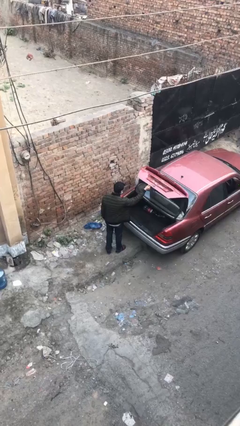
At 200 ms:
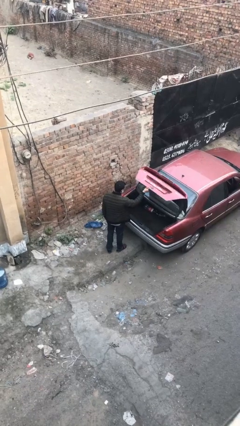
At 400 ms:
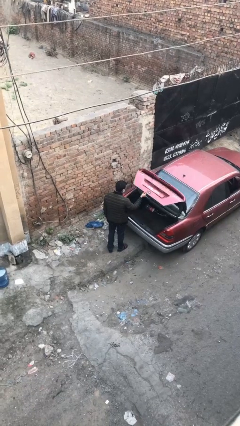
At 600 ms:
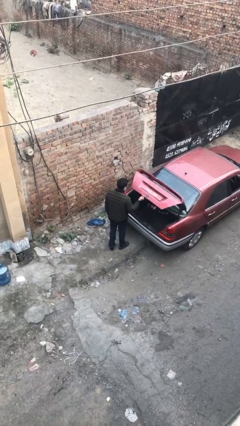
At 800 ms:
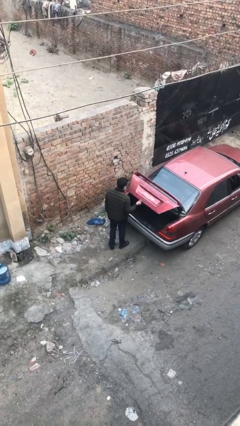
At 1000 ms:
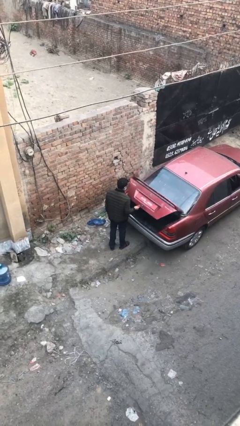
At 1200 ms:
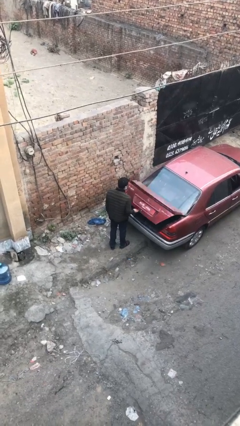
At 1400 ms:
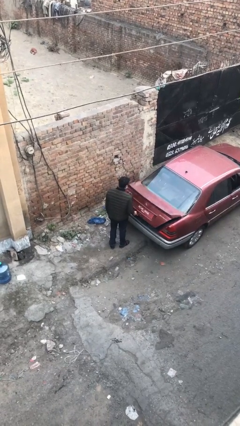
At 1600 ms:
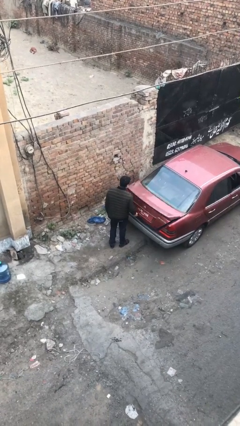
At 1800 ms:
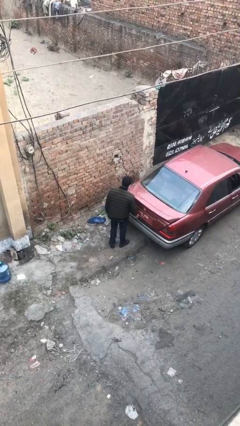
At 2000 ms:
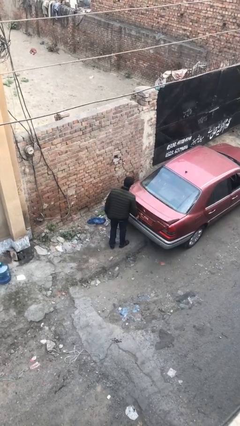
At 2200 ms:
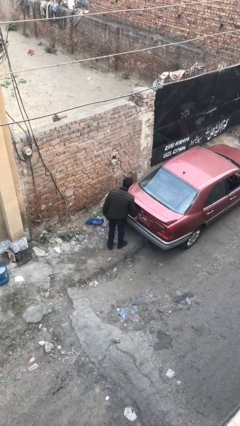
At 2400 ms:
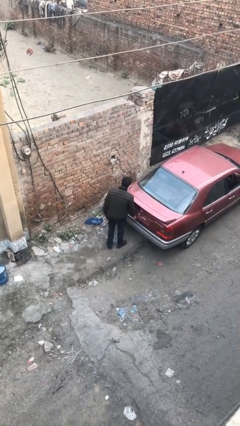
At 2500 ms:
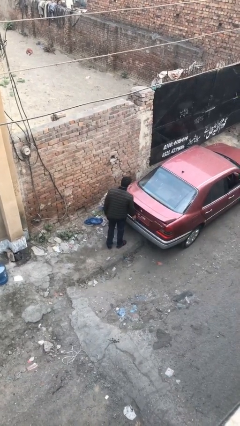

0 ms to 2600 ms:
person closes car trunk

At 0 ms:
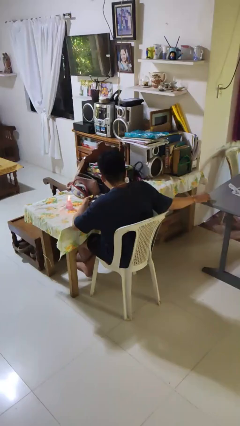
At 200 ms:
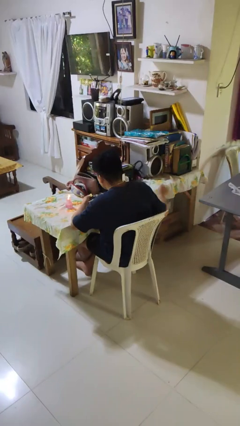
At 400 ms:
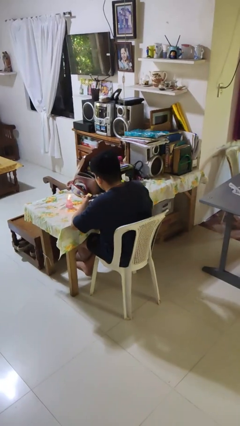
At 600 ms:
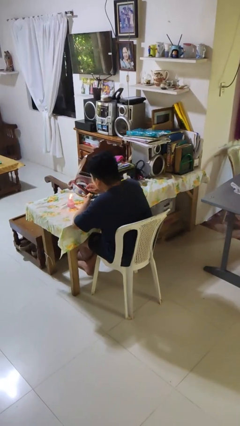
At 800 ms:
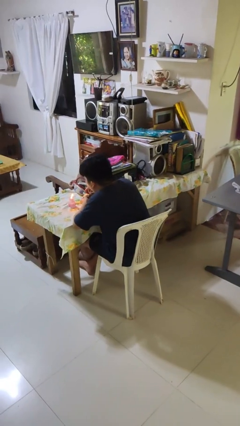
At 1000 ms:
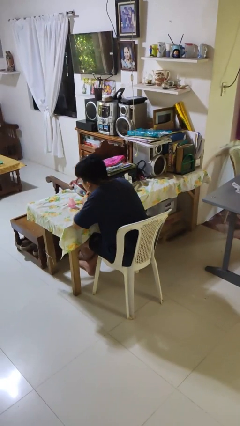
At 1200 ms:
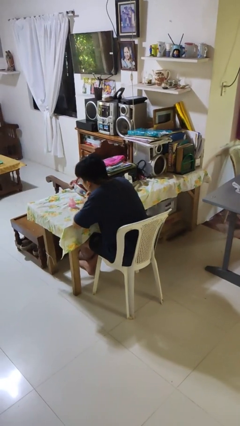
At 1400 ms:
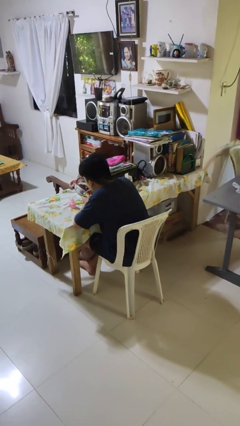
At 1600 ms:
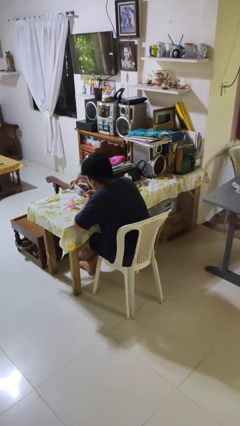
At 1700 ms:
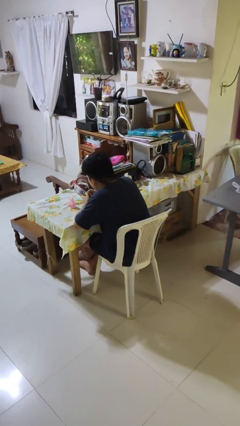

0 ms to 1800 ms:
person extinguishes candle

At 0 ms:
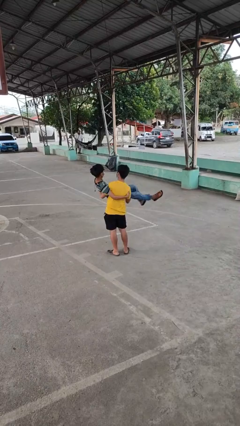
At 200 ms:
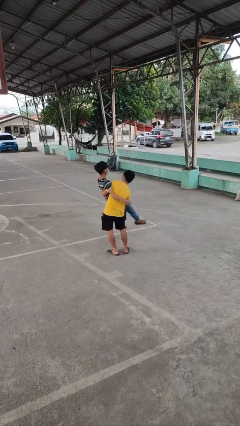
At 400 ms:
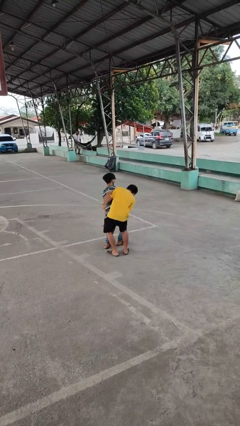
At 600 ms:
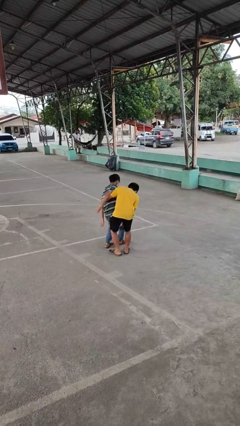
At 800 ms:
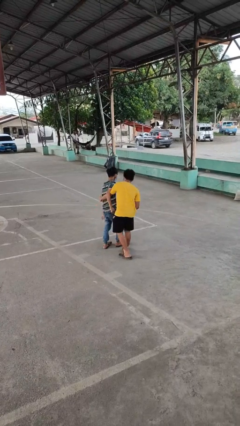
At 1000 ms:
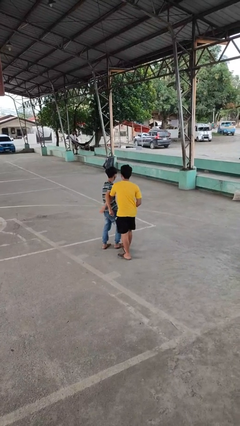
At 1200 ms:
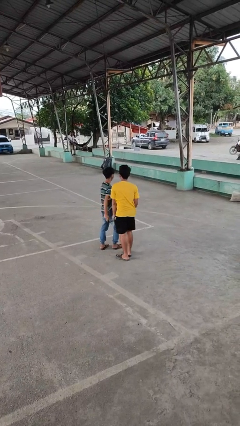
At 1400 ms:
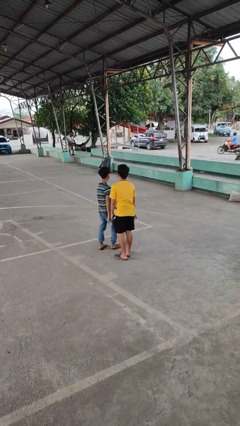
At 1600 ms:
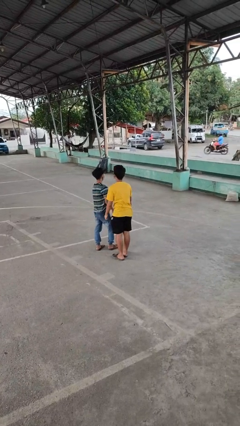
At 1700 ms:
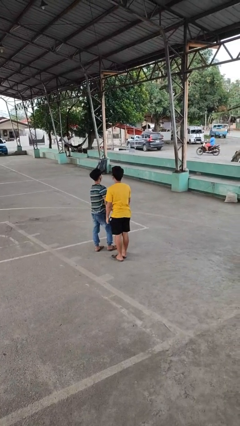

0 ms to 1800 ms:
person puts down person

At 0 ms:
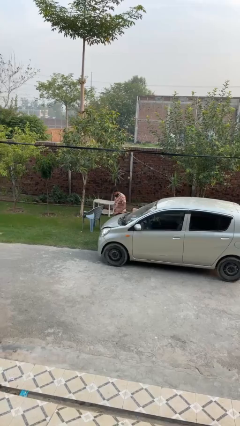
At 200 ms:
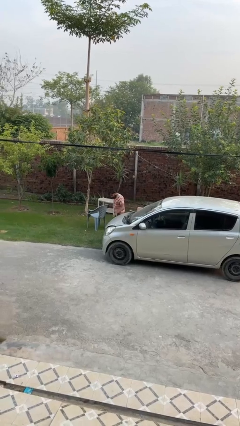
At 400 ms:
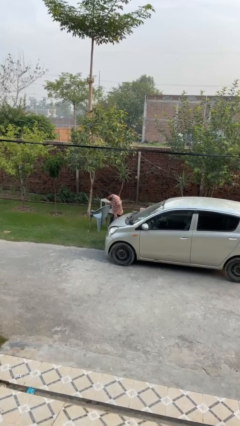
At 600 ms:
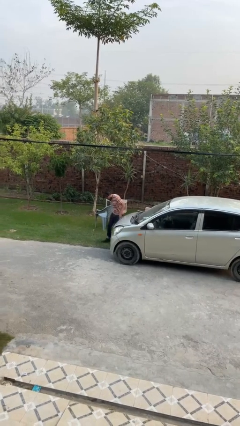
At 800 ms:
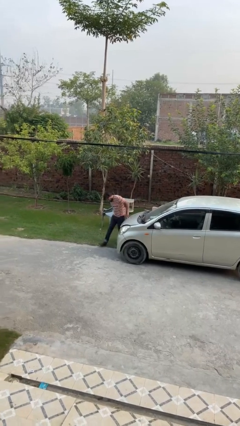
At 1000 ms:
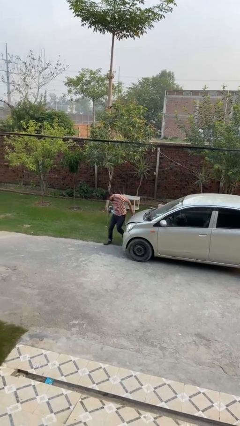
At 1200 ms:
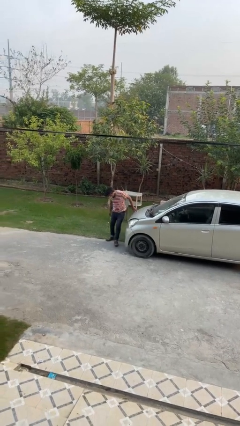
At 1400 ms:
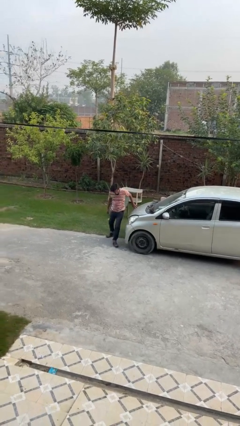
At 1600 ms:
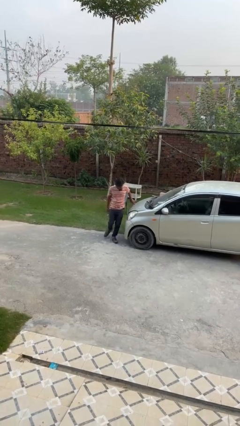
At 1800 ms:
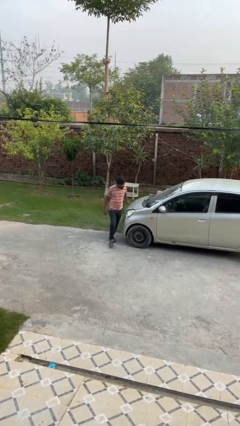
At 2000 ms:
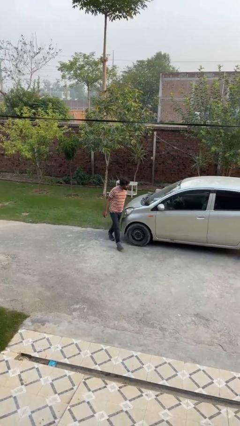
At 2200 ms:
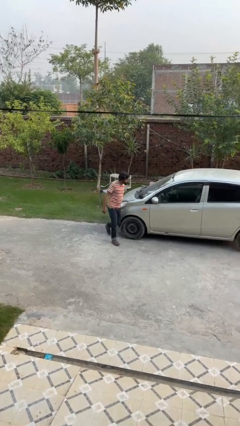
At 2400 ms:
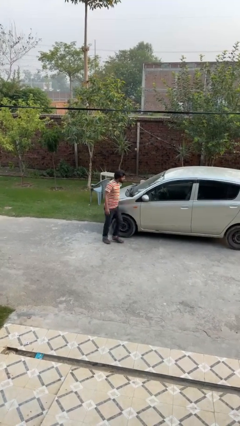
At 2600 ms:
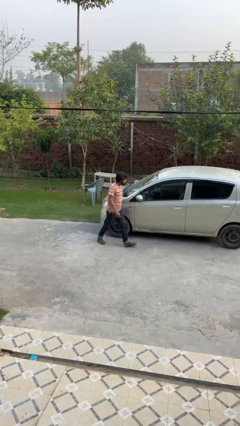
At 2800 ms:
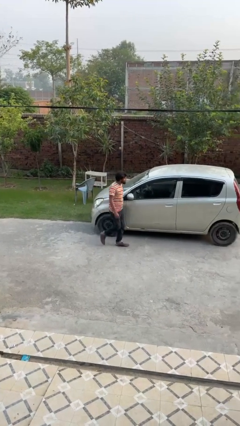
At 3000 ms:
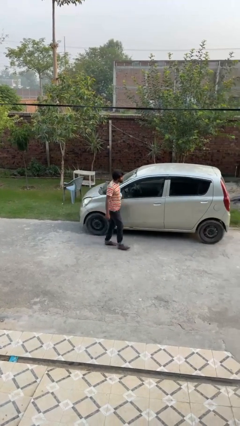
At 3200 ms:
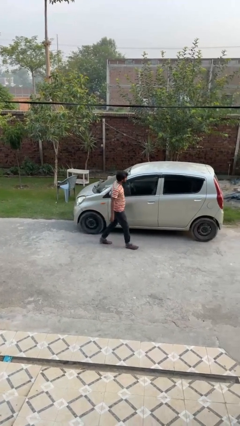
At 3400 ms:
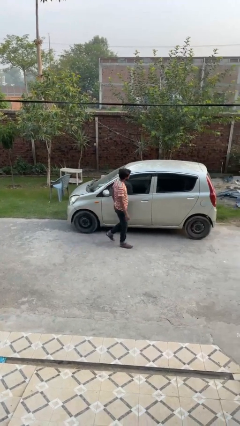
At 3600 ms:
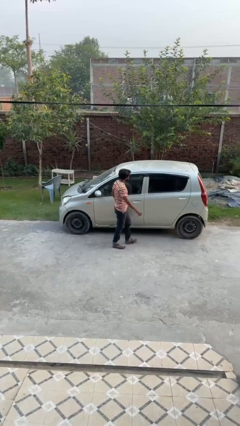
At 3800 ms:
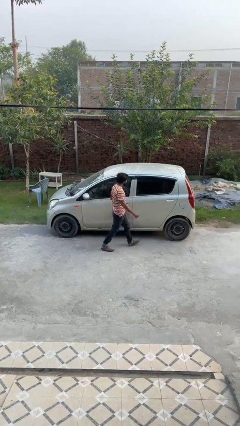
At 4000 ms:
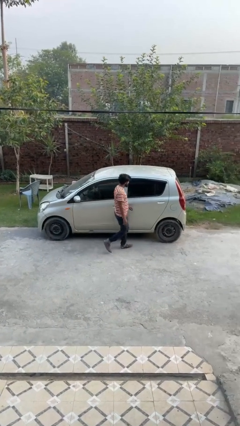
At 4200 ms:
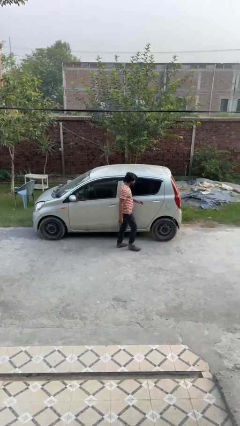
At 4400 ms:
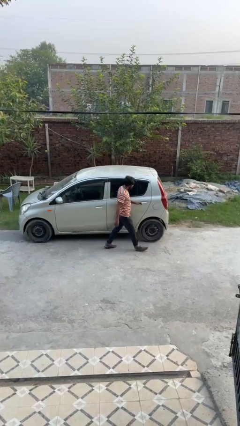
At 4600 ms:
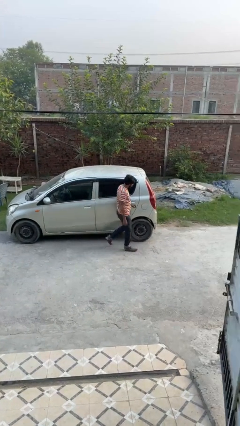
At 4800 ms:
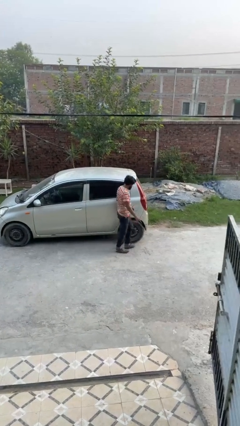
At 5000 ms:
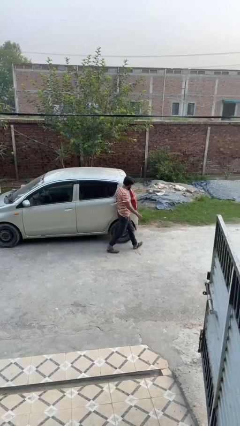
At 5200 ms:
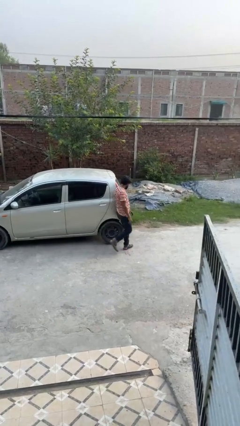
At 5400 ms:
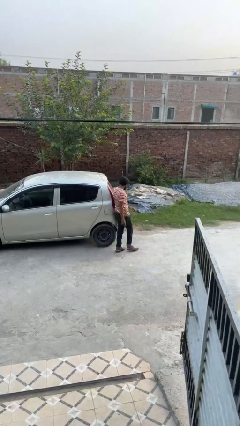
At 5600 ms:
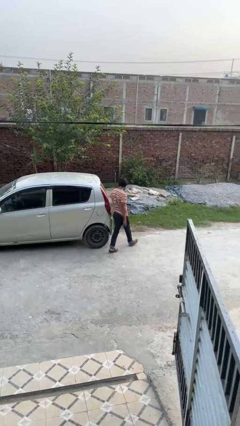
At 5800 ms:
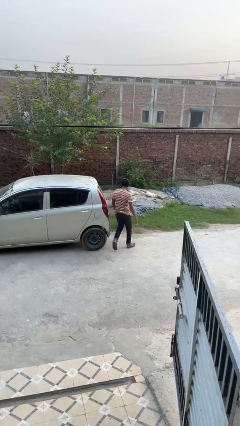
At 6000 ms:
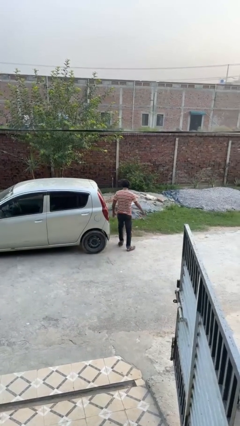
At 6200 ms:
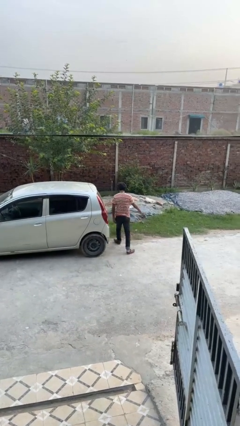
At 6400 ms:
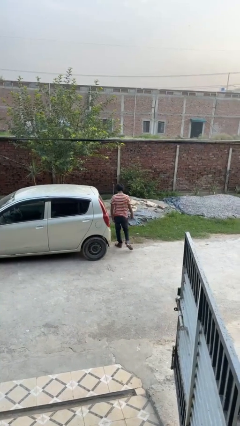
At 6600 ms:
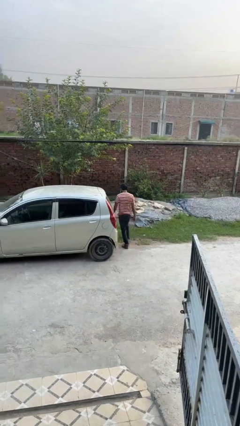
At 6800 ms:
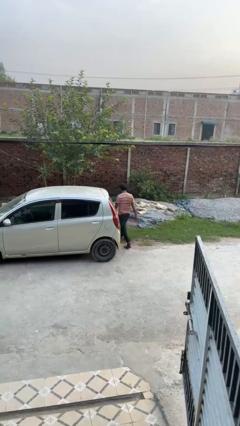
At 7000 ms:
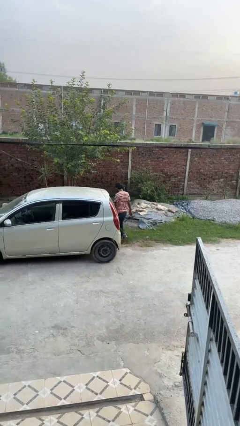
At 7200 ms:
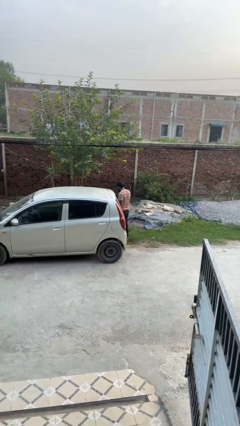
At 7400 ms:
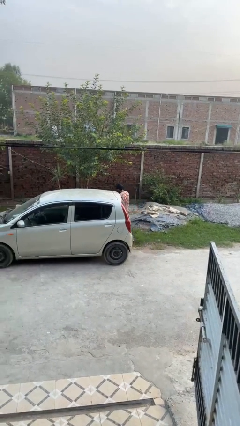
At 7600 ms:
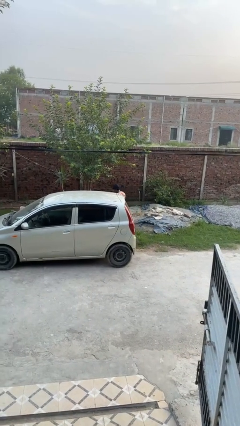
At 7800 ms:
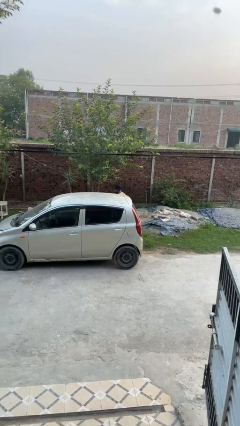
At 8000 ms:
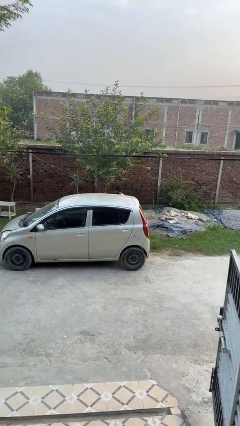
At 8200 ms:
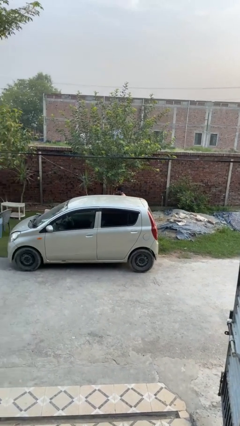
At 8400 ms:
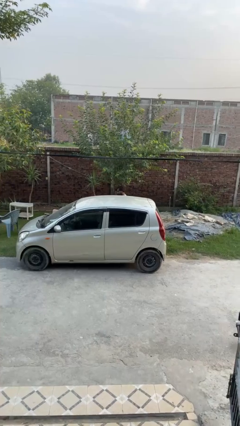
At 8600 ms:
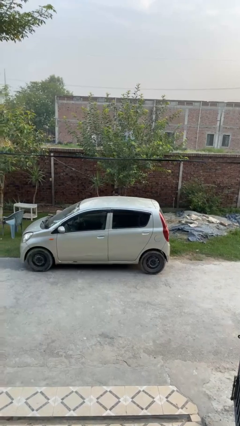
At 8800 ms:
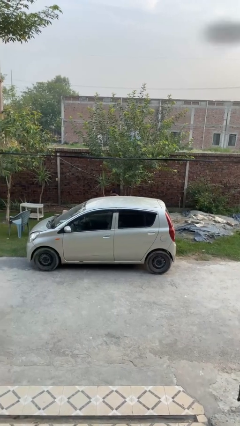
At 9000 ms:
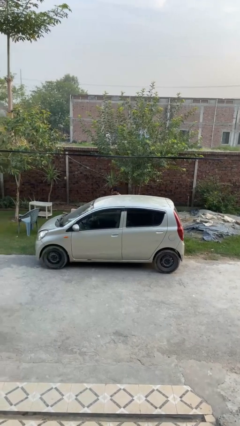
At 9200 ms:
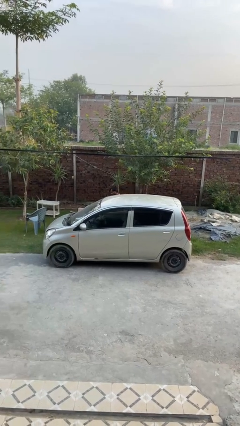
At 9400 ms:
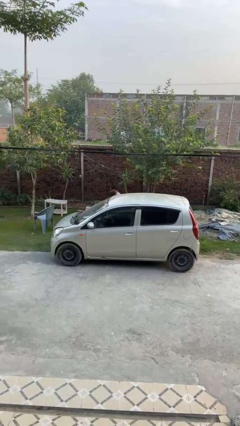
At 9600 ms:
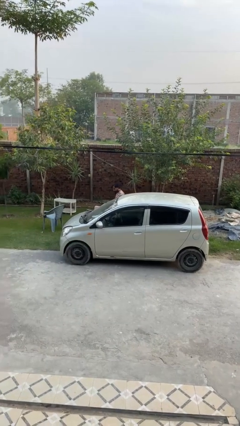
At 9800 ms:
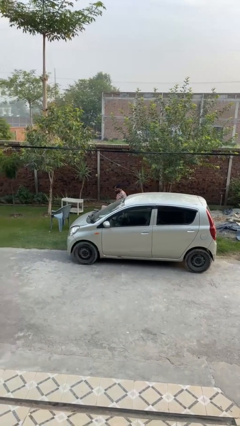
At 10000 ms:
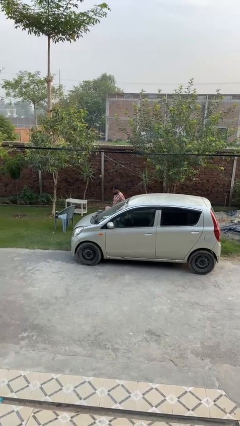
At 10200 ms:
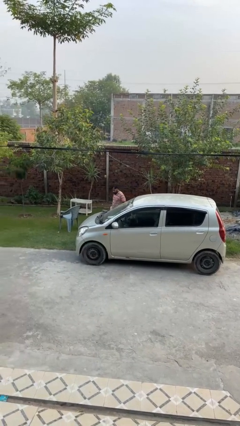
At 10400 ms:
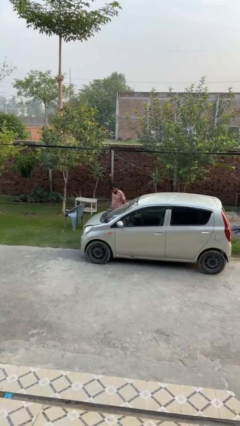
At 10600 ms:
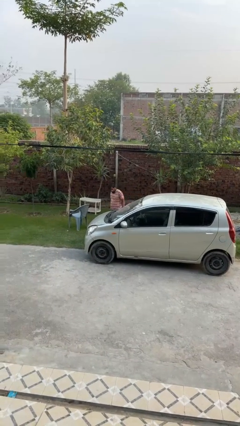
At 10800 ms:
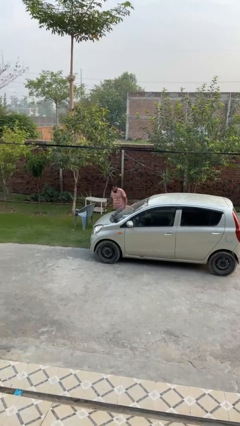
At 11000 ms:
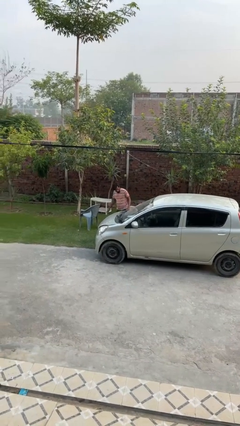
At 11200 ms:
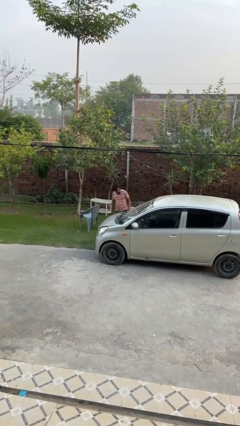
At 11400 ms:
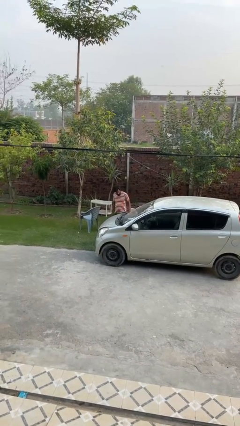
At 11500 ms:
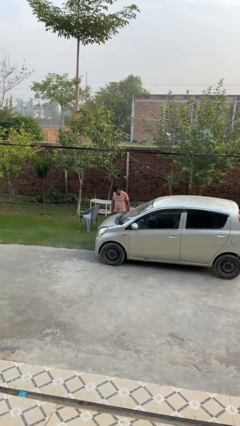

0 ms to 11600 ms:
person walks around car
